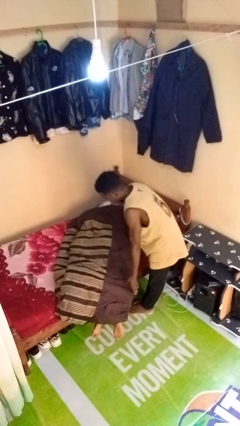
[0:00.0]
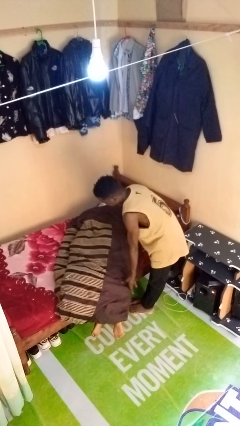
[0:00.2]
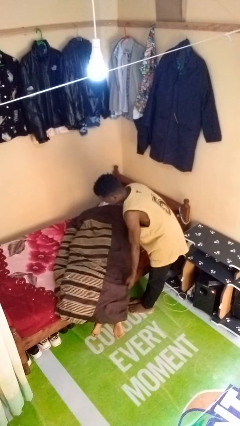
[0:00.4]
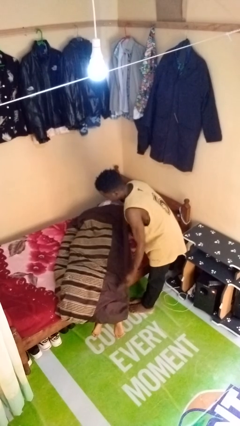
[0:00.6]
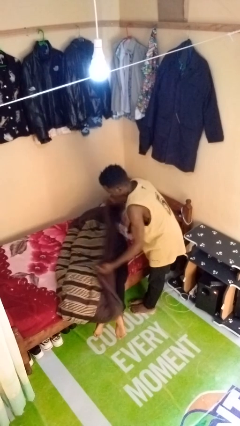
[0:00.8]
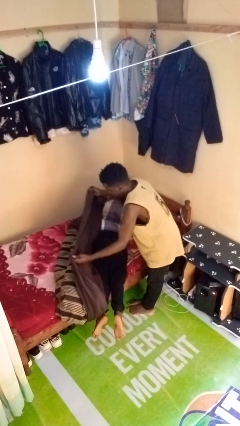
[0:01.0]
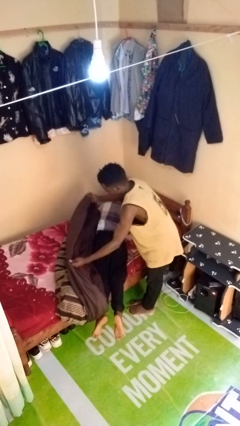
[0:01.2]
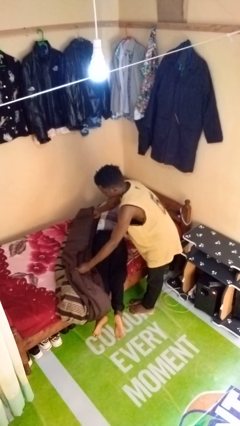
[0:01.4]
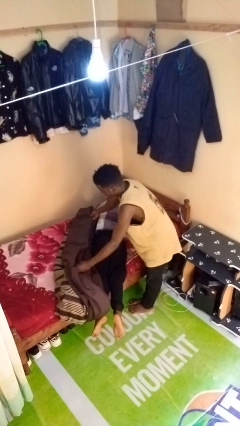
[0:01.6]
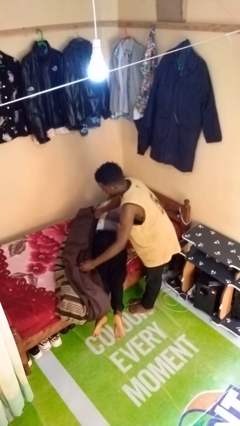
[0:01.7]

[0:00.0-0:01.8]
person uncovers friend with blanket

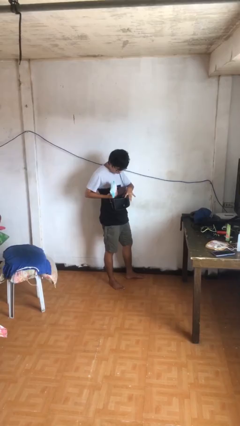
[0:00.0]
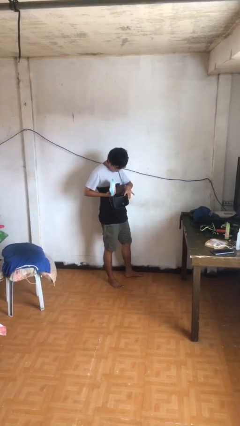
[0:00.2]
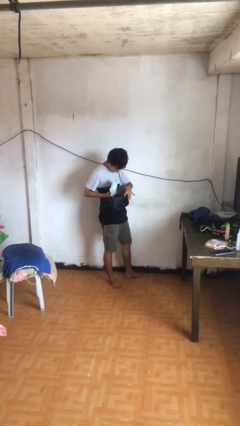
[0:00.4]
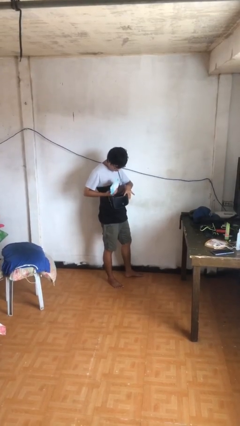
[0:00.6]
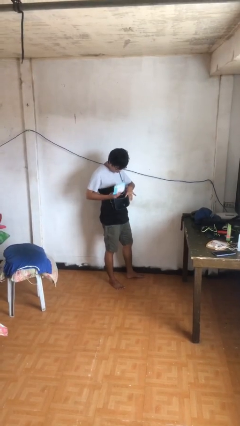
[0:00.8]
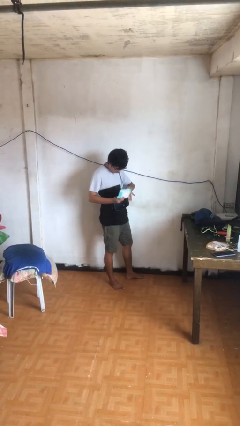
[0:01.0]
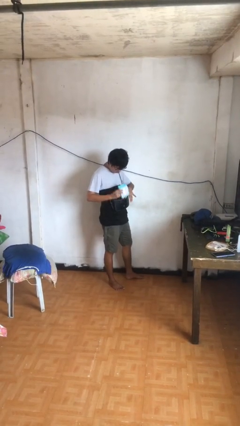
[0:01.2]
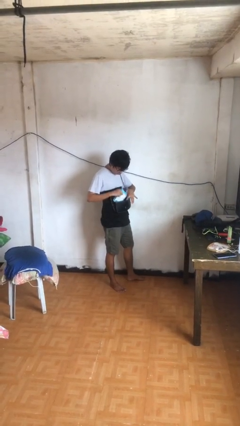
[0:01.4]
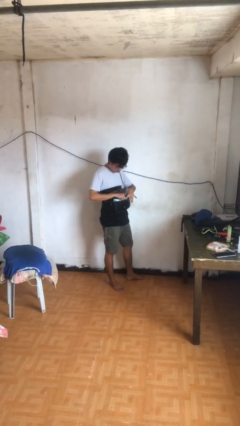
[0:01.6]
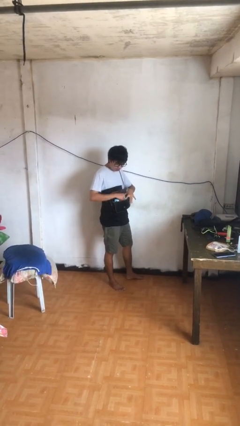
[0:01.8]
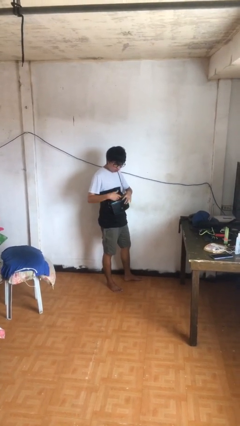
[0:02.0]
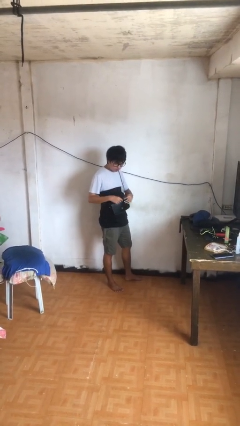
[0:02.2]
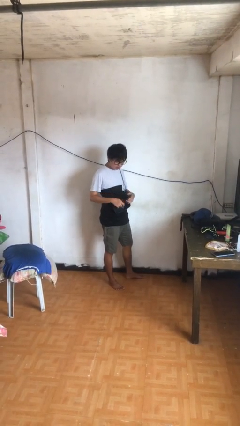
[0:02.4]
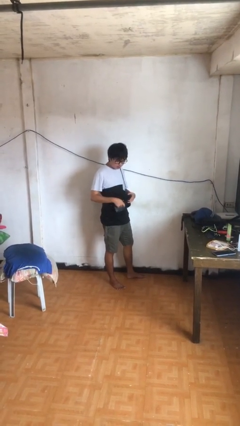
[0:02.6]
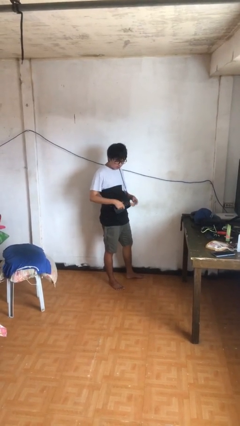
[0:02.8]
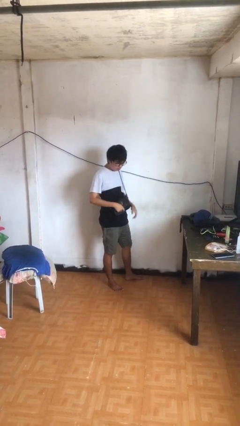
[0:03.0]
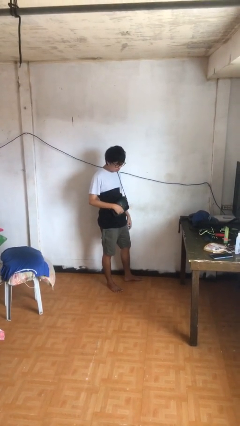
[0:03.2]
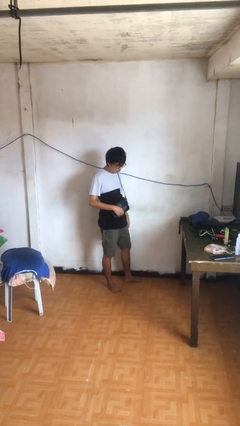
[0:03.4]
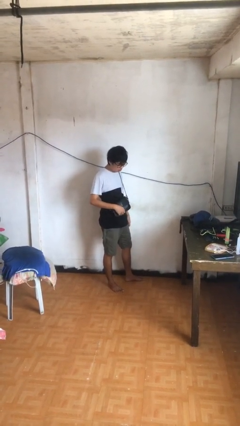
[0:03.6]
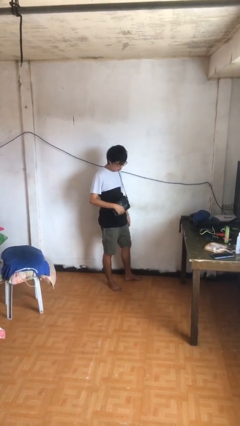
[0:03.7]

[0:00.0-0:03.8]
person puts object into purse

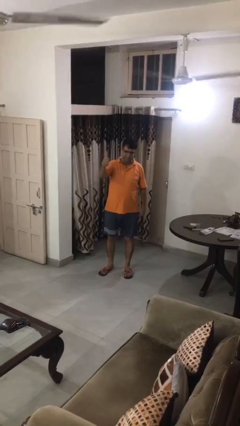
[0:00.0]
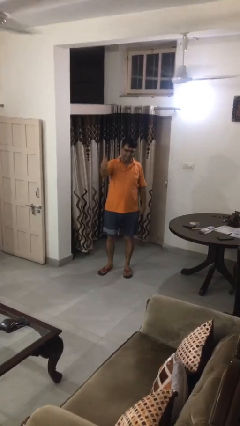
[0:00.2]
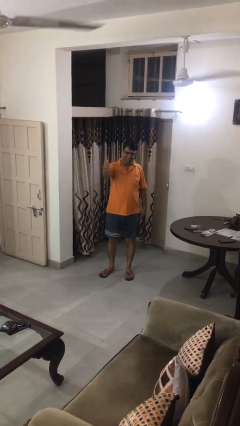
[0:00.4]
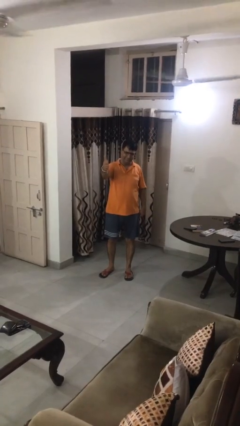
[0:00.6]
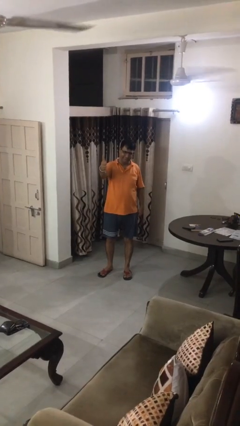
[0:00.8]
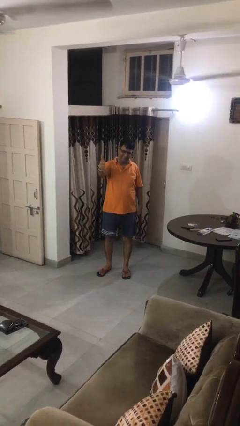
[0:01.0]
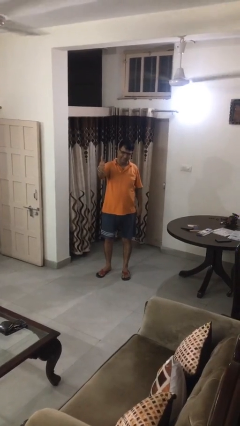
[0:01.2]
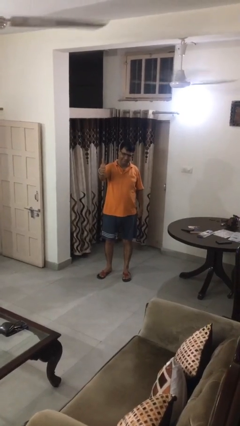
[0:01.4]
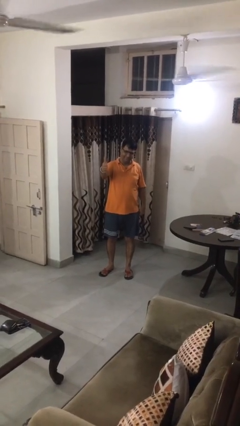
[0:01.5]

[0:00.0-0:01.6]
person gestures thumbs up

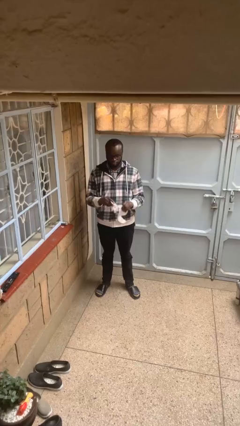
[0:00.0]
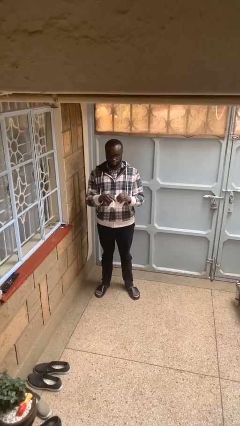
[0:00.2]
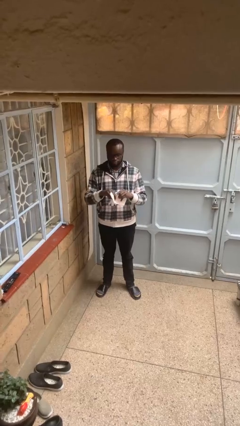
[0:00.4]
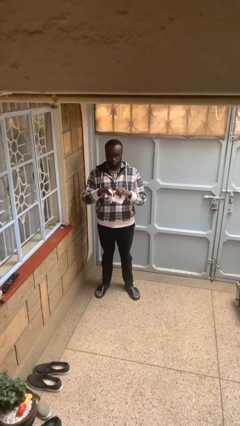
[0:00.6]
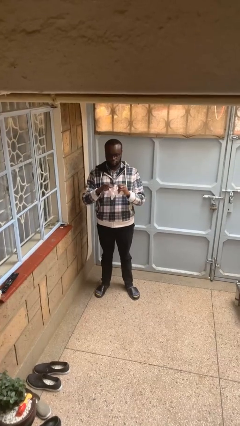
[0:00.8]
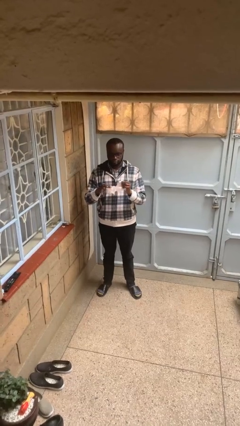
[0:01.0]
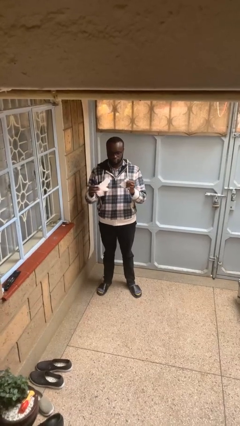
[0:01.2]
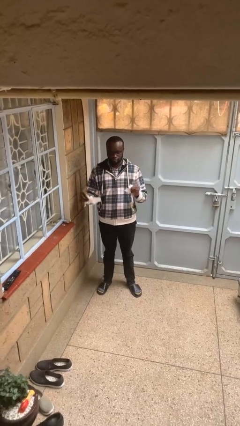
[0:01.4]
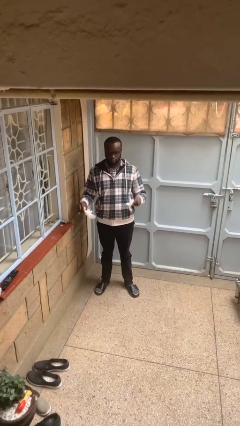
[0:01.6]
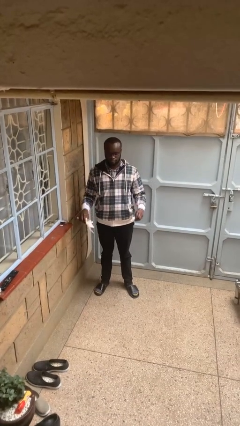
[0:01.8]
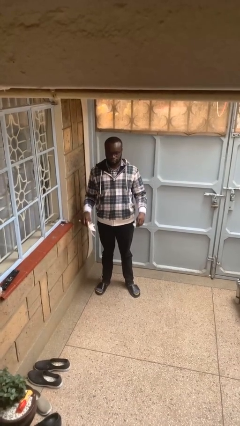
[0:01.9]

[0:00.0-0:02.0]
person tears paper

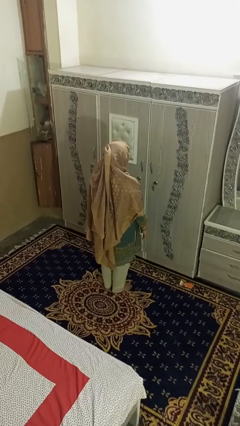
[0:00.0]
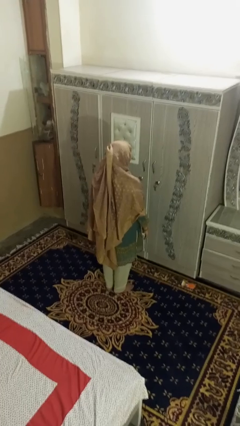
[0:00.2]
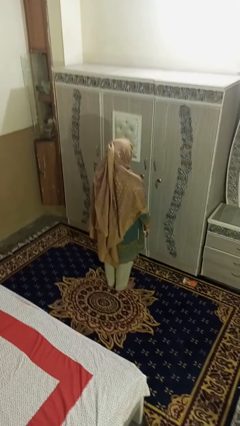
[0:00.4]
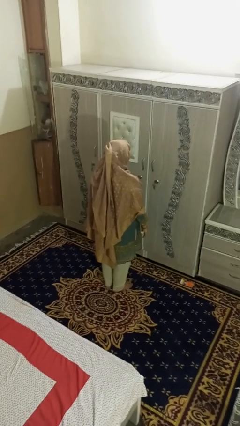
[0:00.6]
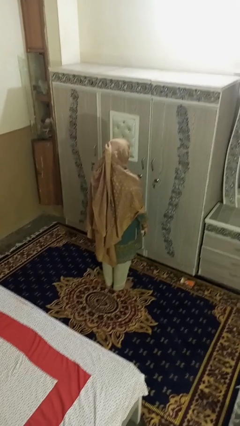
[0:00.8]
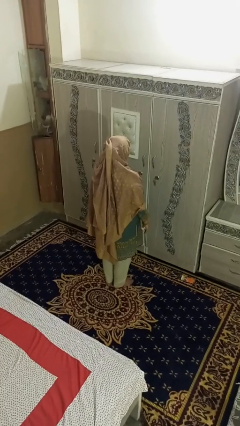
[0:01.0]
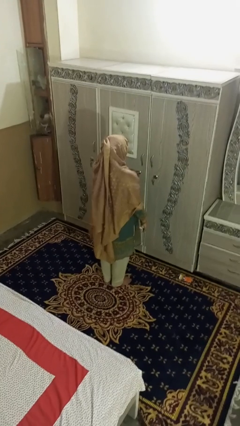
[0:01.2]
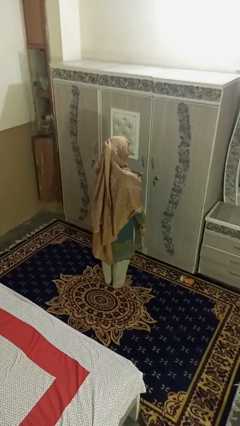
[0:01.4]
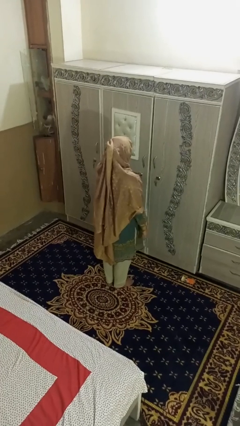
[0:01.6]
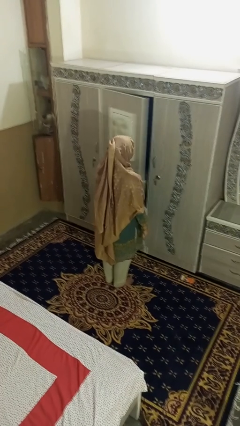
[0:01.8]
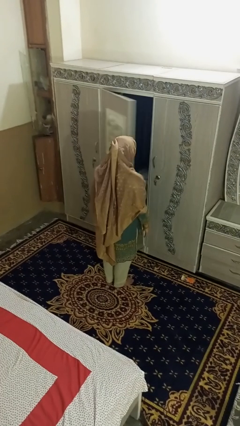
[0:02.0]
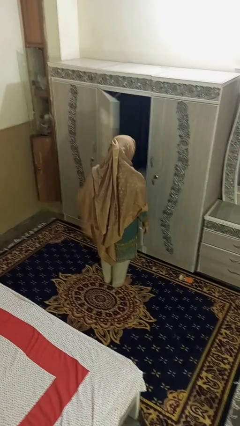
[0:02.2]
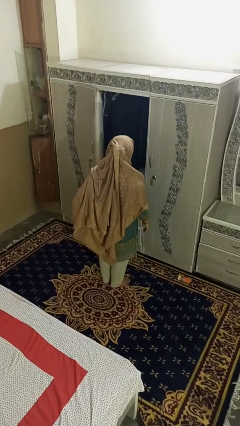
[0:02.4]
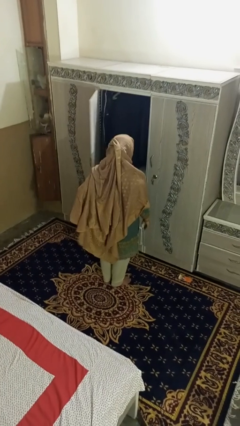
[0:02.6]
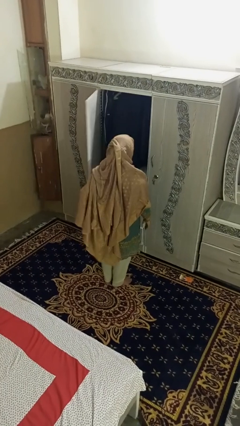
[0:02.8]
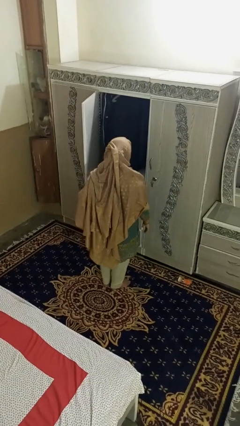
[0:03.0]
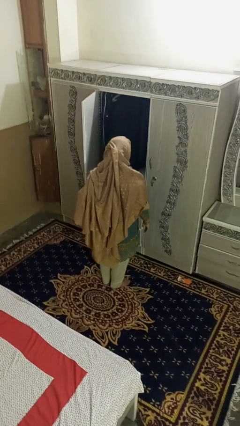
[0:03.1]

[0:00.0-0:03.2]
person opens dresser drawer

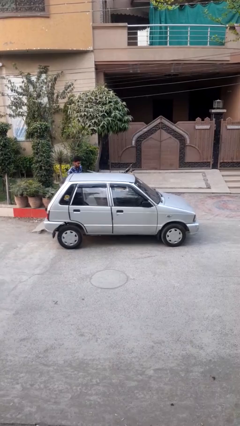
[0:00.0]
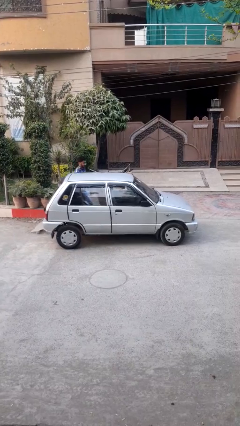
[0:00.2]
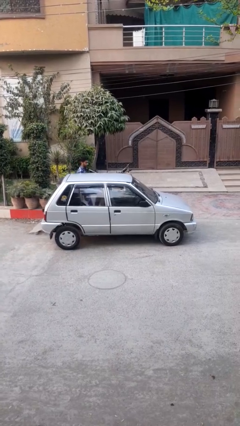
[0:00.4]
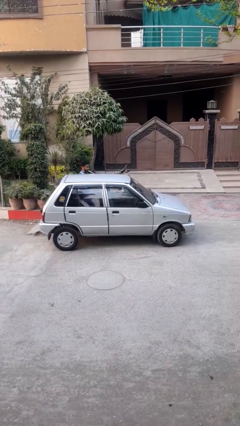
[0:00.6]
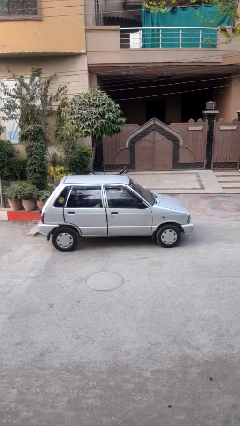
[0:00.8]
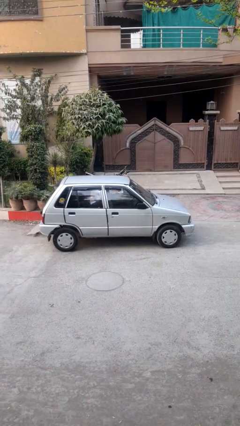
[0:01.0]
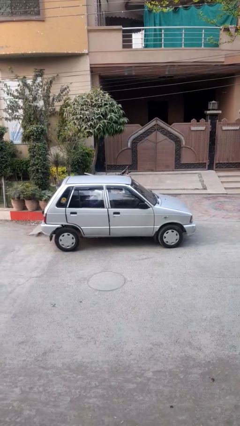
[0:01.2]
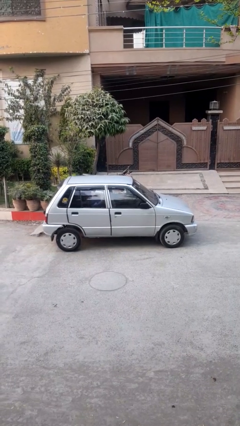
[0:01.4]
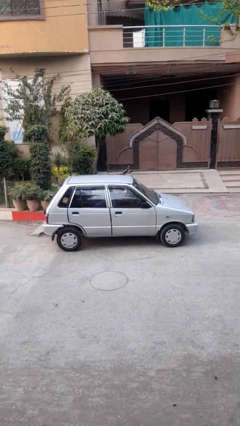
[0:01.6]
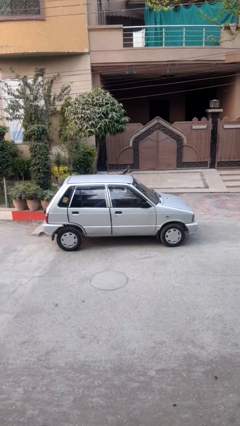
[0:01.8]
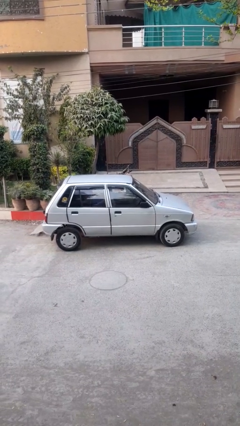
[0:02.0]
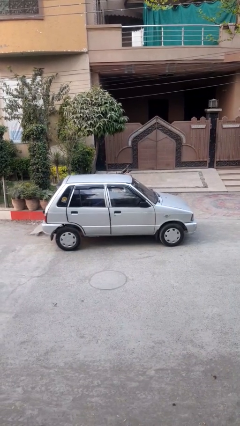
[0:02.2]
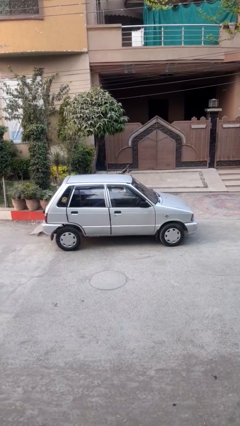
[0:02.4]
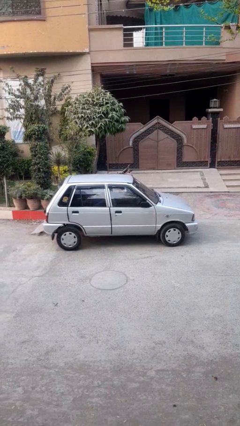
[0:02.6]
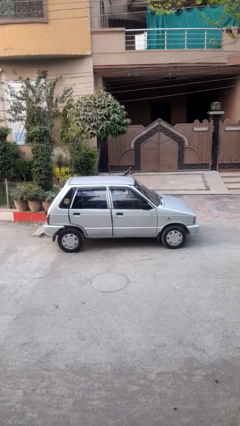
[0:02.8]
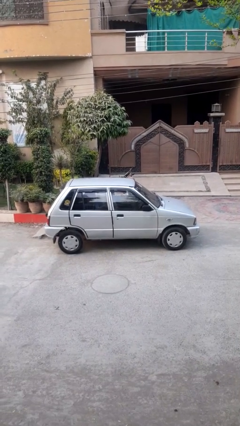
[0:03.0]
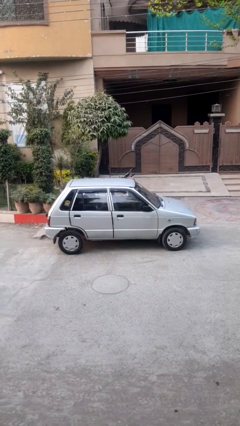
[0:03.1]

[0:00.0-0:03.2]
car picks up person

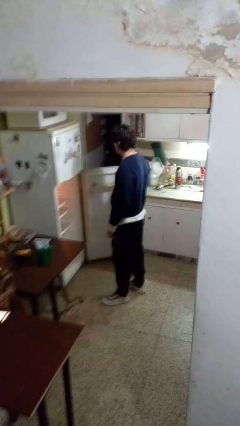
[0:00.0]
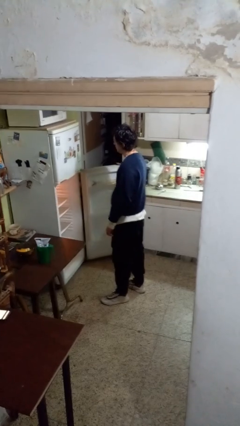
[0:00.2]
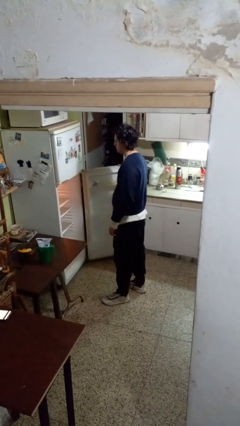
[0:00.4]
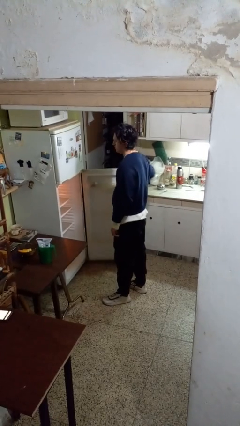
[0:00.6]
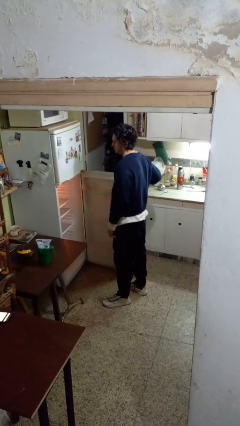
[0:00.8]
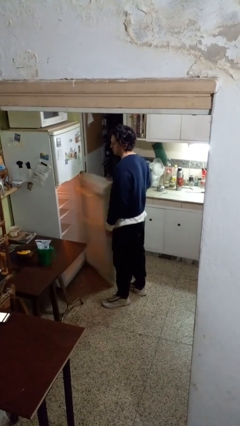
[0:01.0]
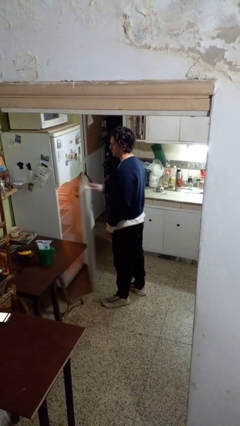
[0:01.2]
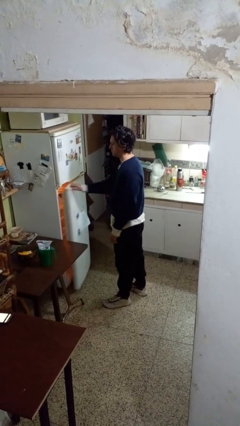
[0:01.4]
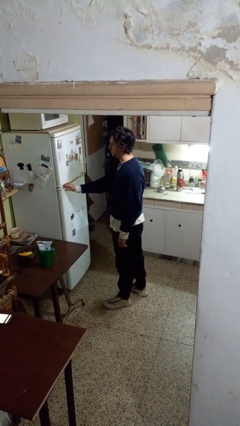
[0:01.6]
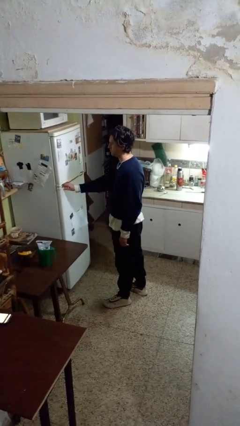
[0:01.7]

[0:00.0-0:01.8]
person closes refrigerator
